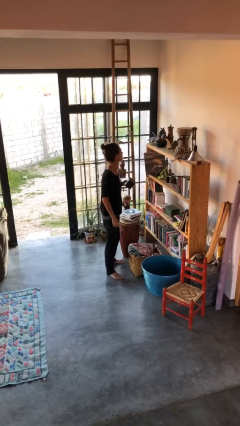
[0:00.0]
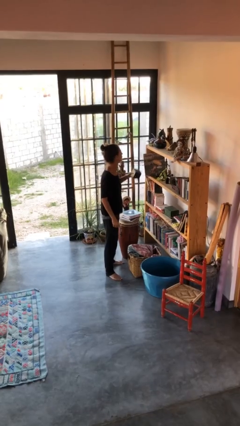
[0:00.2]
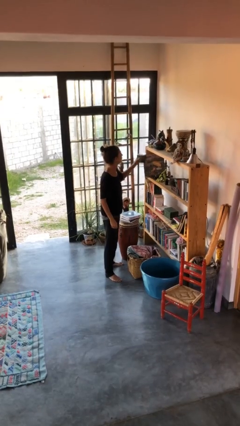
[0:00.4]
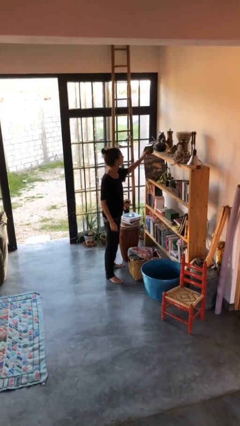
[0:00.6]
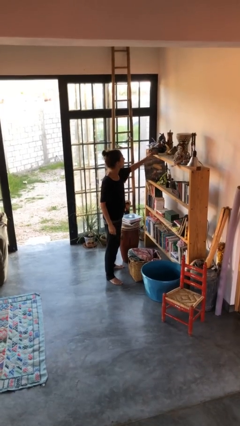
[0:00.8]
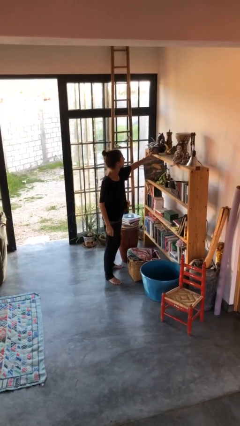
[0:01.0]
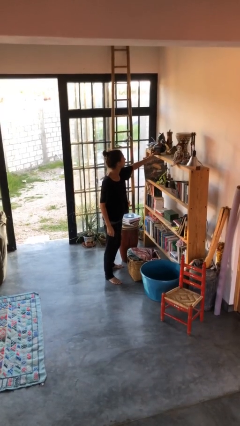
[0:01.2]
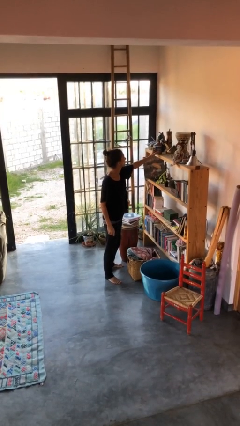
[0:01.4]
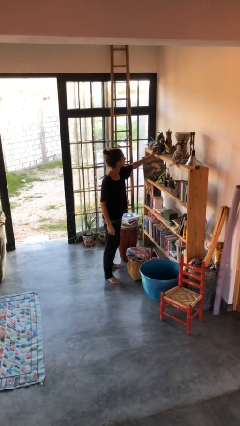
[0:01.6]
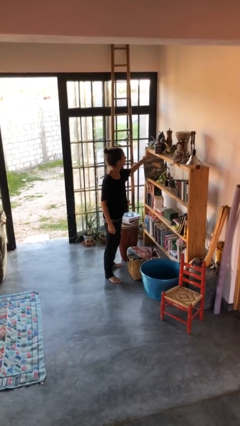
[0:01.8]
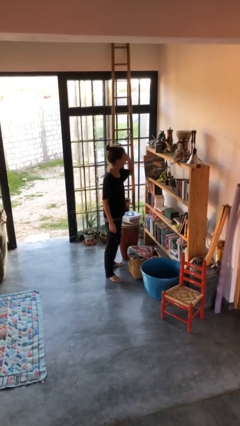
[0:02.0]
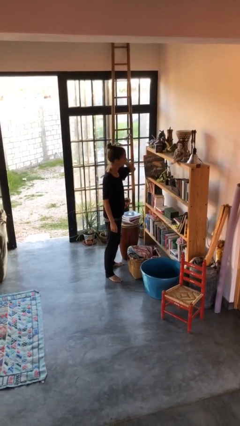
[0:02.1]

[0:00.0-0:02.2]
person puts down object on countertop

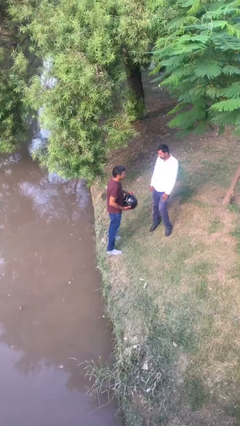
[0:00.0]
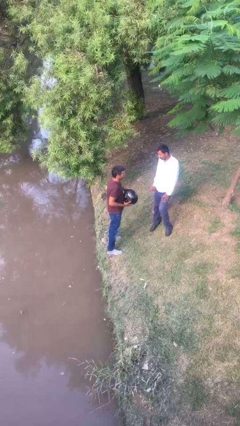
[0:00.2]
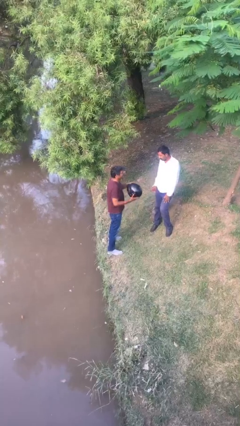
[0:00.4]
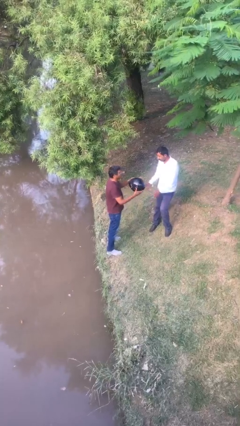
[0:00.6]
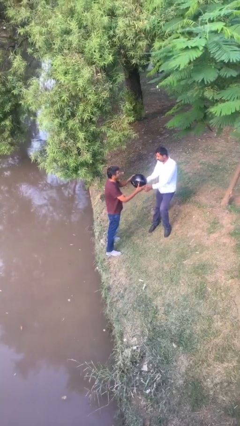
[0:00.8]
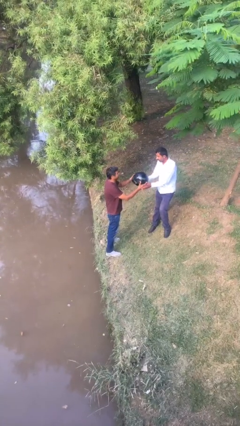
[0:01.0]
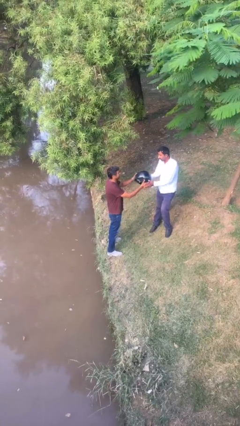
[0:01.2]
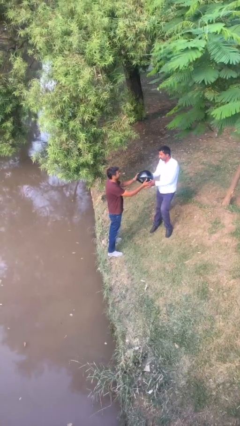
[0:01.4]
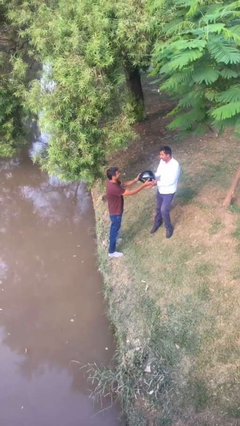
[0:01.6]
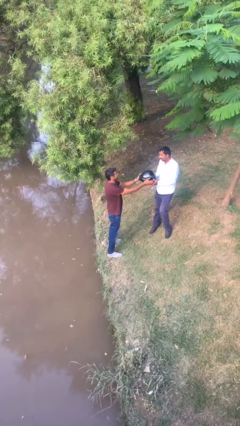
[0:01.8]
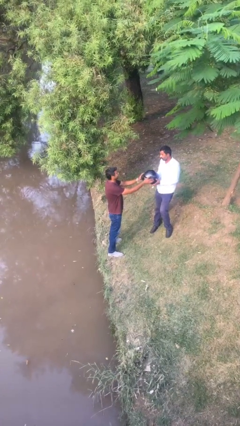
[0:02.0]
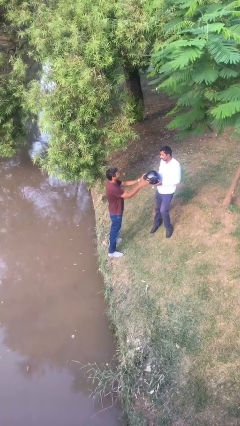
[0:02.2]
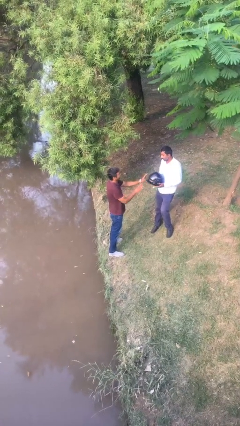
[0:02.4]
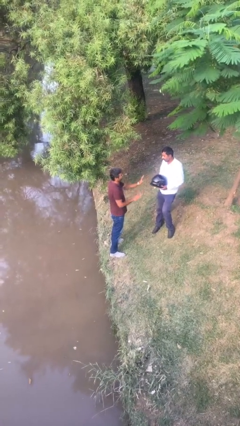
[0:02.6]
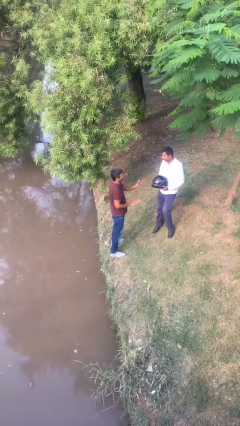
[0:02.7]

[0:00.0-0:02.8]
person transfers object to person

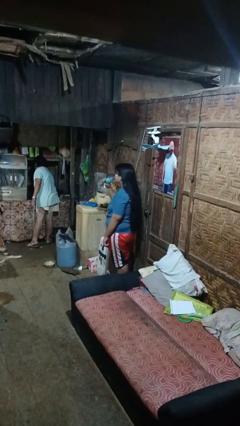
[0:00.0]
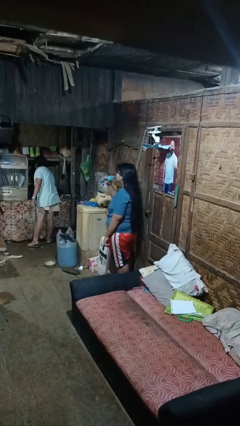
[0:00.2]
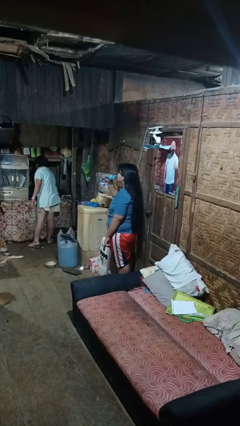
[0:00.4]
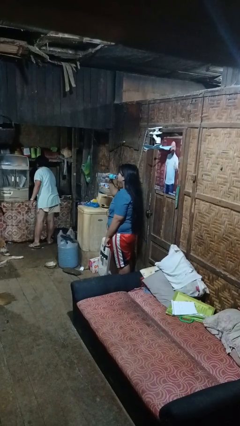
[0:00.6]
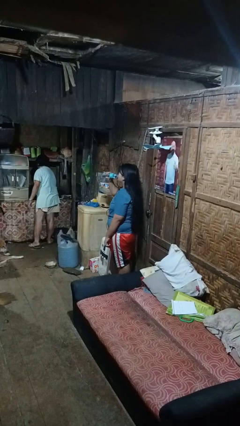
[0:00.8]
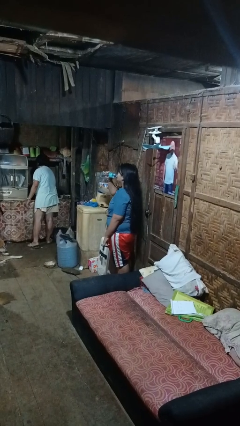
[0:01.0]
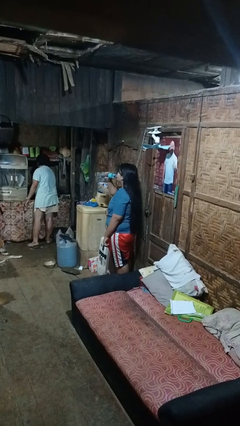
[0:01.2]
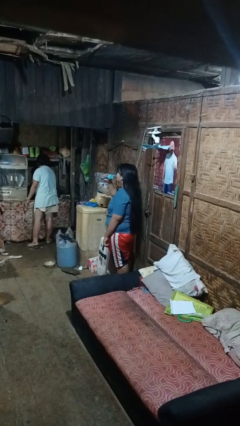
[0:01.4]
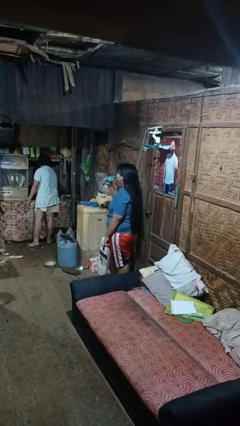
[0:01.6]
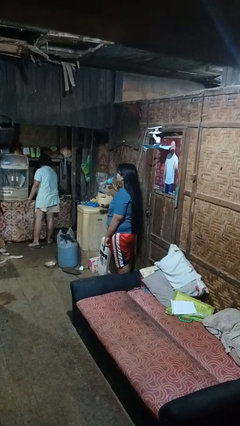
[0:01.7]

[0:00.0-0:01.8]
person drinks from bottle

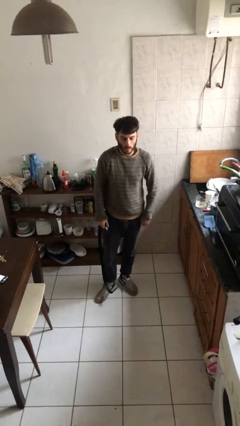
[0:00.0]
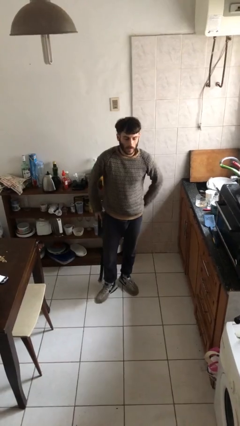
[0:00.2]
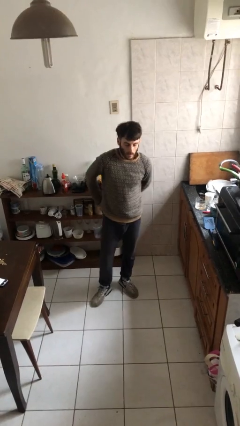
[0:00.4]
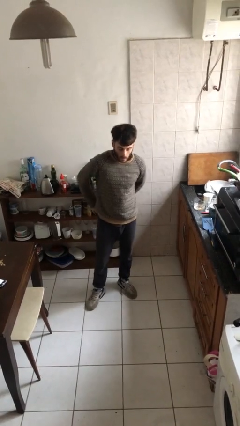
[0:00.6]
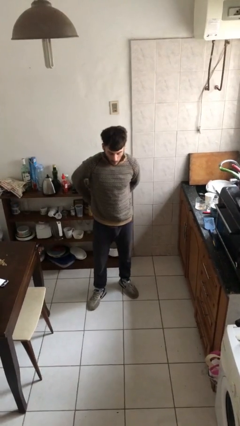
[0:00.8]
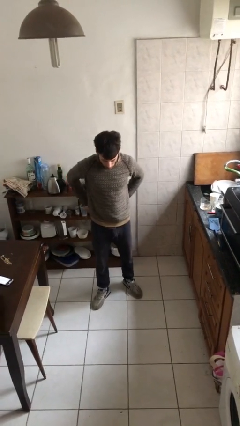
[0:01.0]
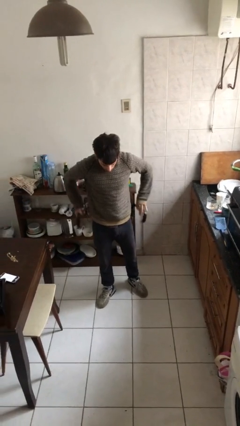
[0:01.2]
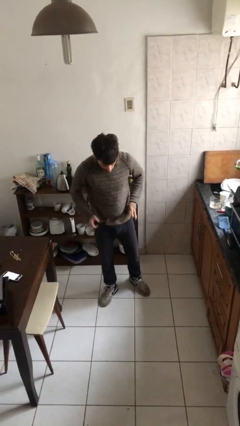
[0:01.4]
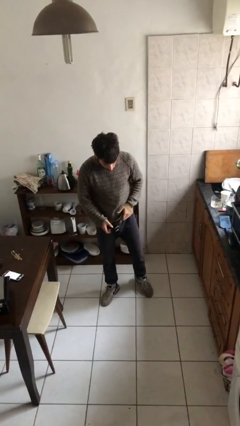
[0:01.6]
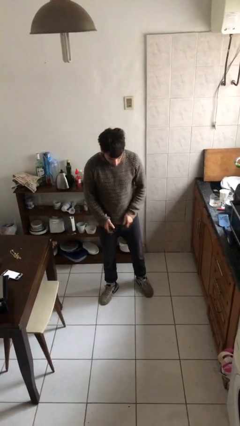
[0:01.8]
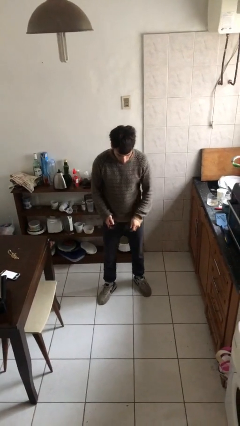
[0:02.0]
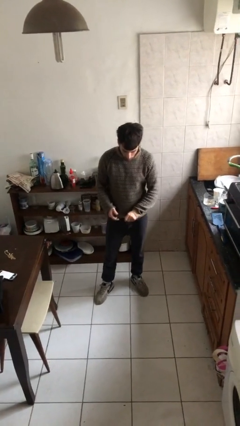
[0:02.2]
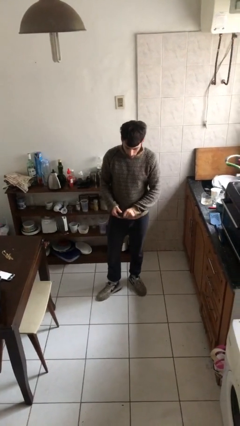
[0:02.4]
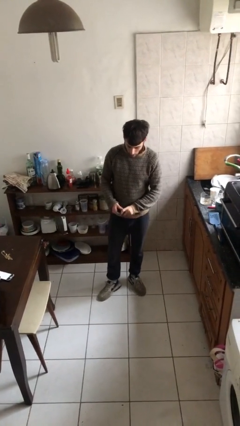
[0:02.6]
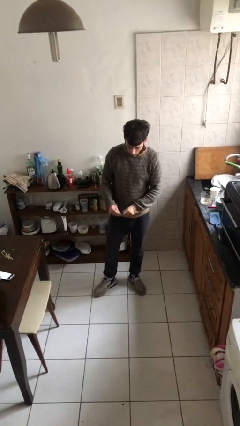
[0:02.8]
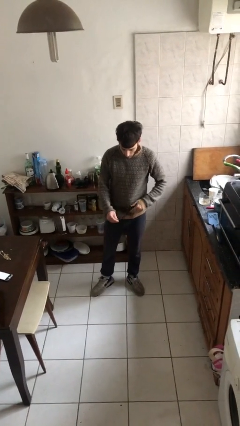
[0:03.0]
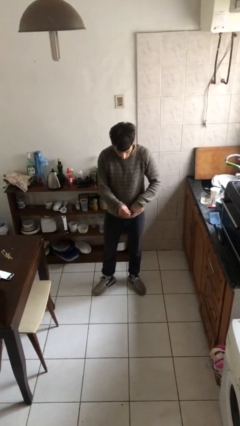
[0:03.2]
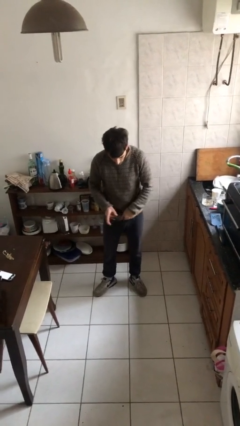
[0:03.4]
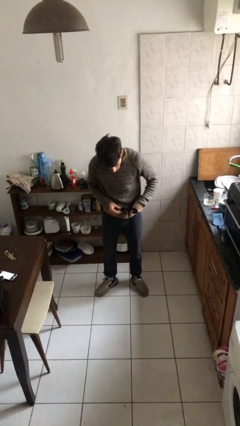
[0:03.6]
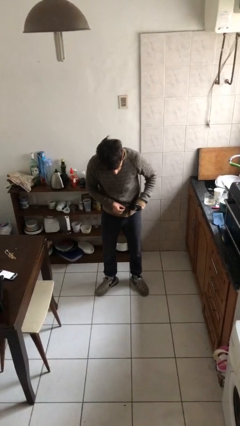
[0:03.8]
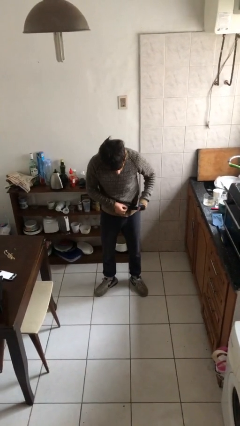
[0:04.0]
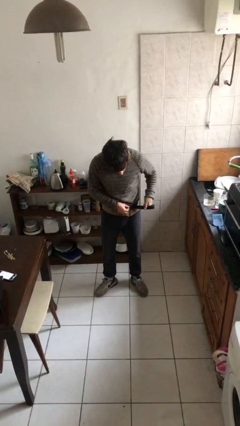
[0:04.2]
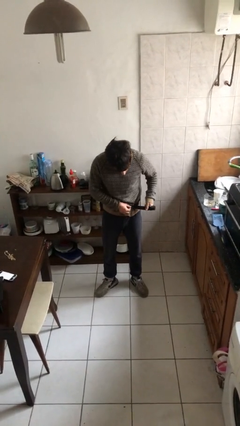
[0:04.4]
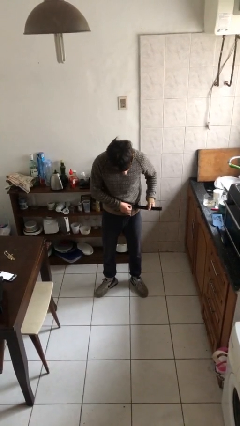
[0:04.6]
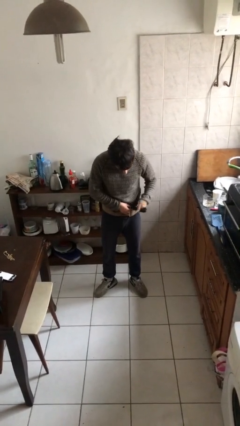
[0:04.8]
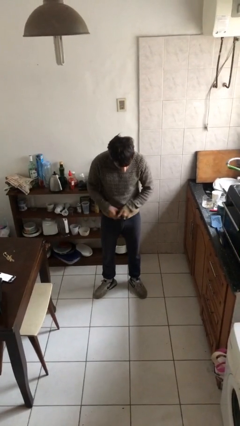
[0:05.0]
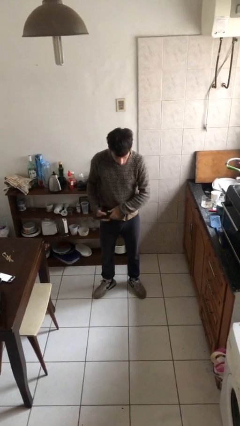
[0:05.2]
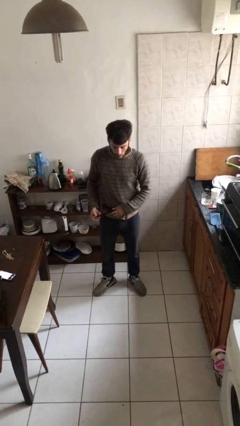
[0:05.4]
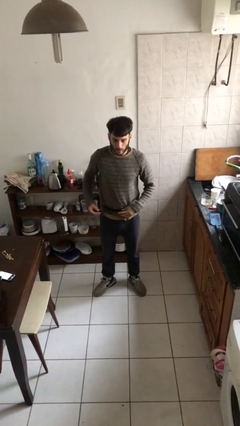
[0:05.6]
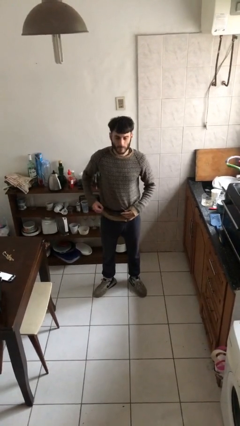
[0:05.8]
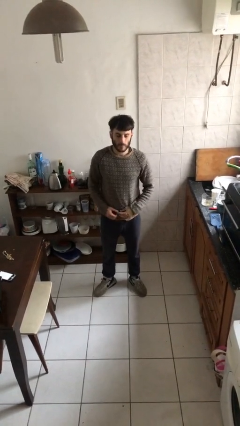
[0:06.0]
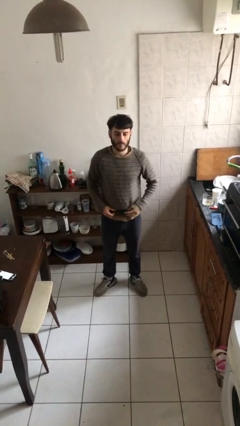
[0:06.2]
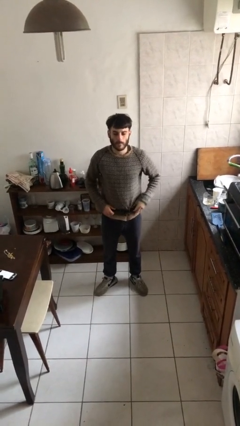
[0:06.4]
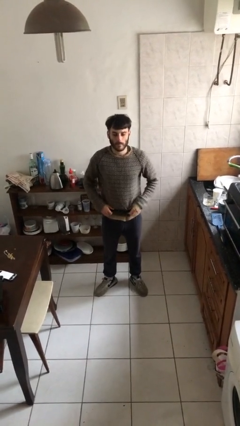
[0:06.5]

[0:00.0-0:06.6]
person puts on belt

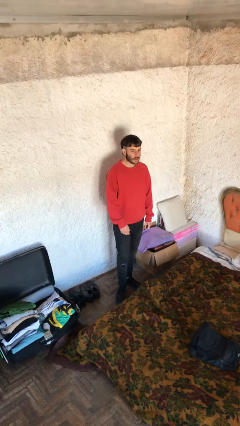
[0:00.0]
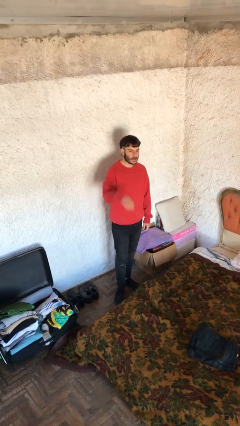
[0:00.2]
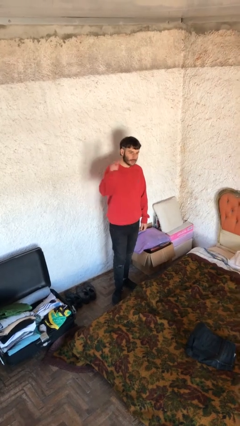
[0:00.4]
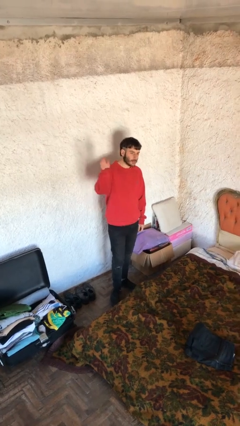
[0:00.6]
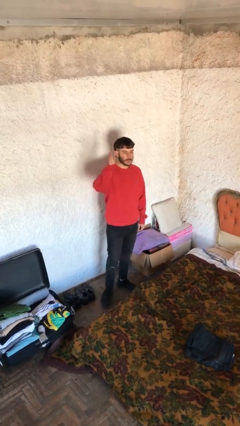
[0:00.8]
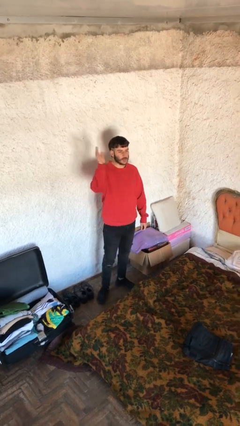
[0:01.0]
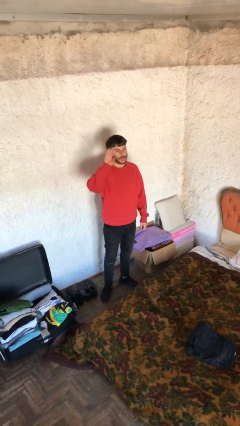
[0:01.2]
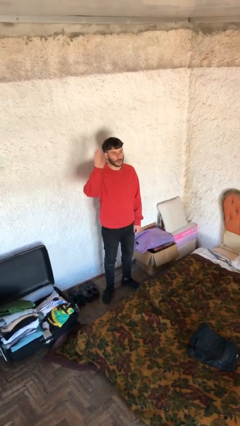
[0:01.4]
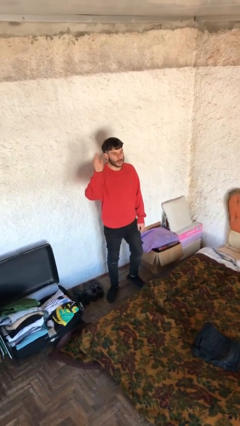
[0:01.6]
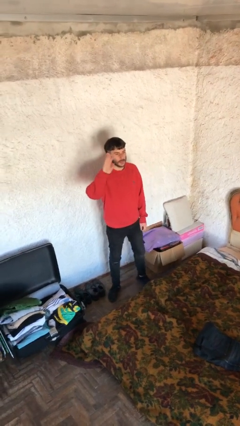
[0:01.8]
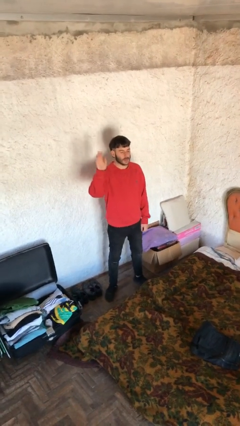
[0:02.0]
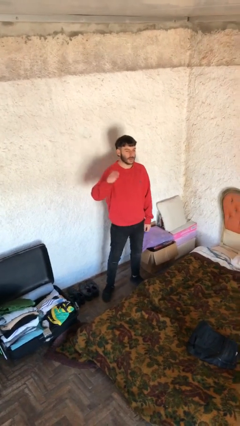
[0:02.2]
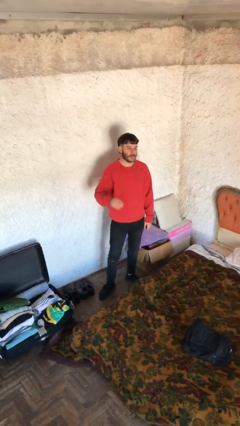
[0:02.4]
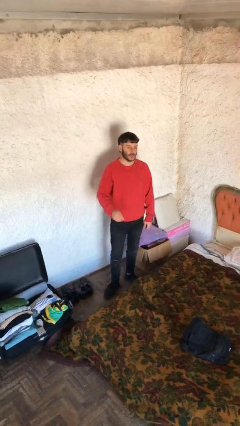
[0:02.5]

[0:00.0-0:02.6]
person waves at person

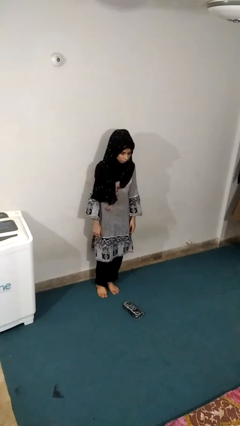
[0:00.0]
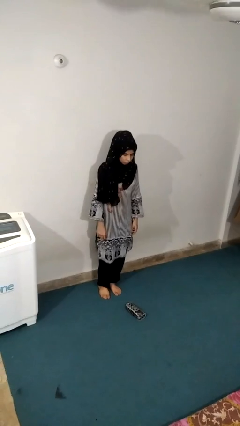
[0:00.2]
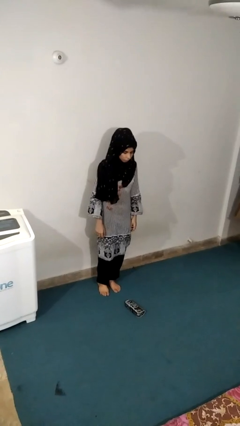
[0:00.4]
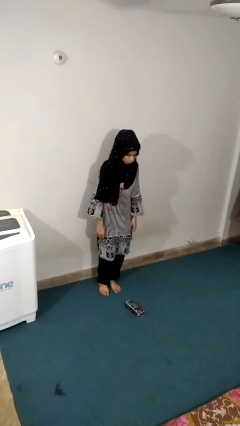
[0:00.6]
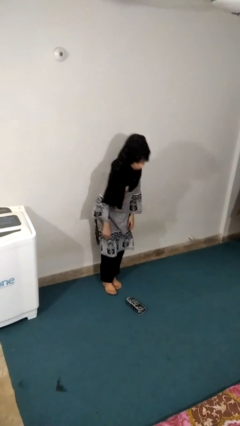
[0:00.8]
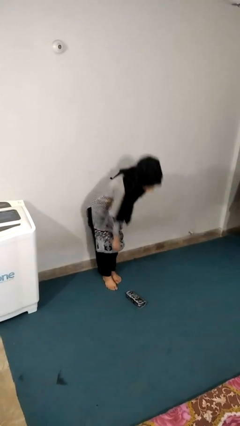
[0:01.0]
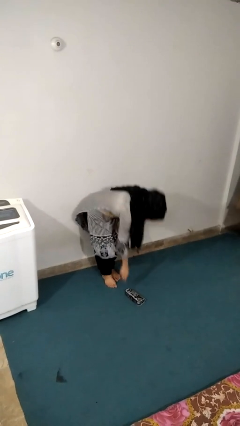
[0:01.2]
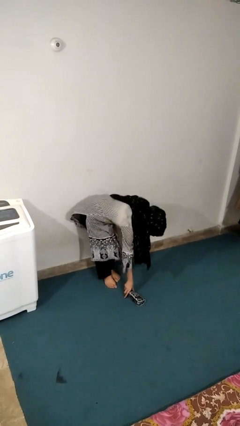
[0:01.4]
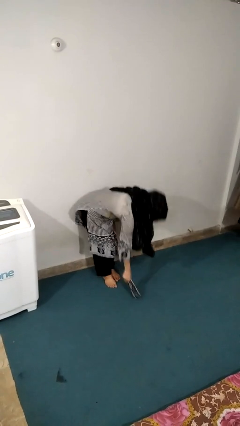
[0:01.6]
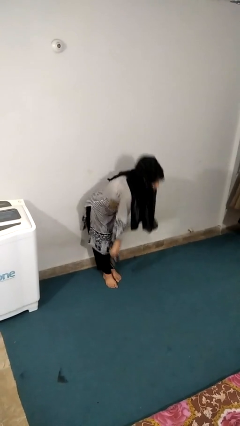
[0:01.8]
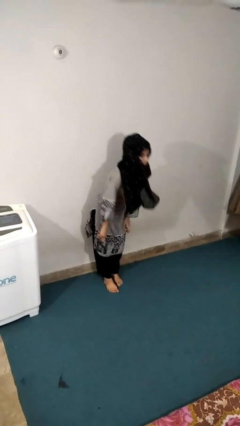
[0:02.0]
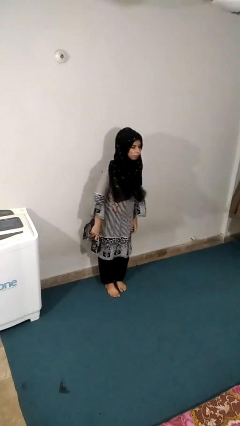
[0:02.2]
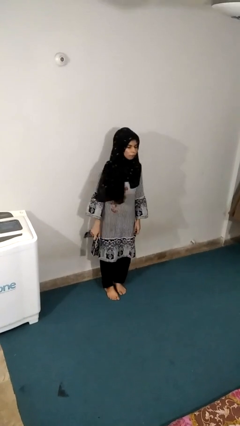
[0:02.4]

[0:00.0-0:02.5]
person picks up object from floor
